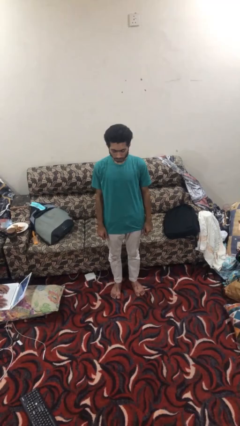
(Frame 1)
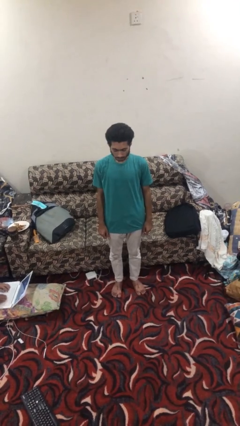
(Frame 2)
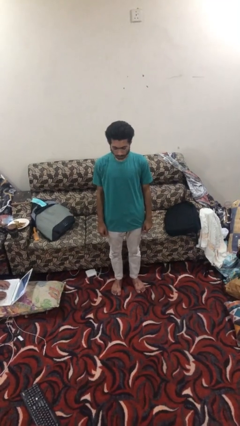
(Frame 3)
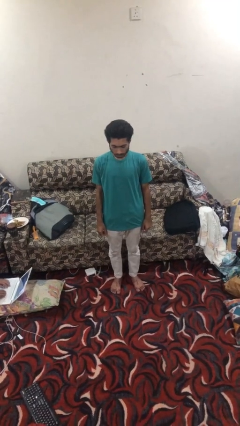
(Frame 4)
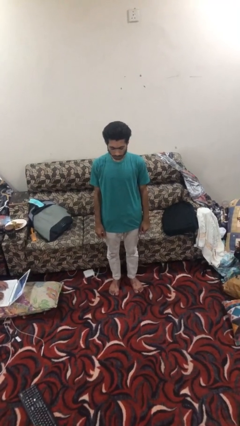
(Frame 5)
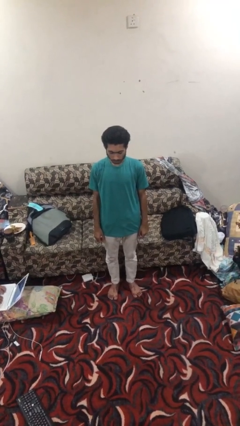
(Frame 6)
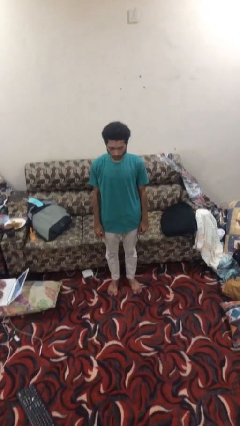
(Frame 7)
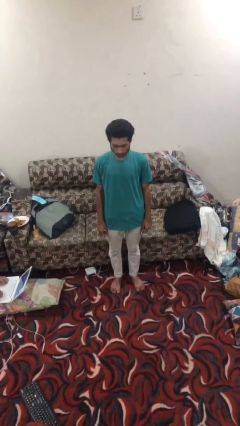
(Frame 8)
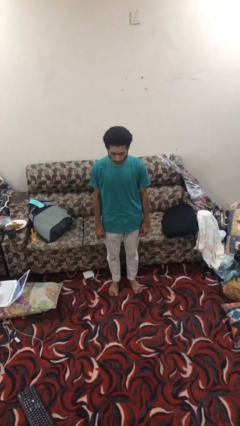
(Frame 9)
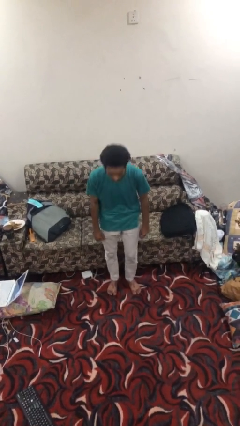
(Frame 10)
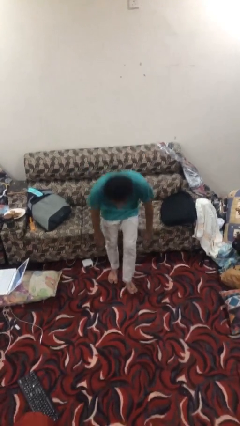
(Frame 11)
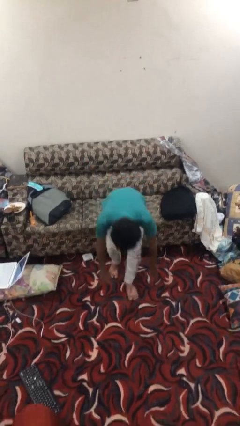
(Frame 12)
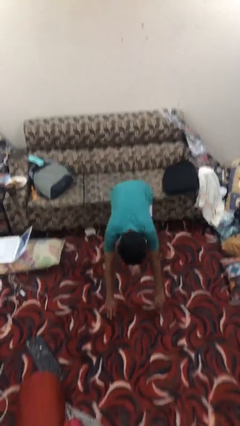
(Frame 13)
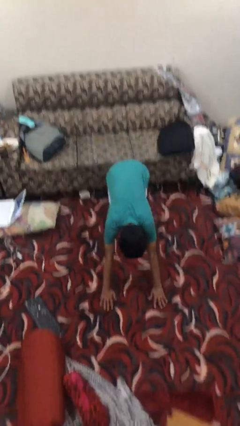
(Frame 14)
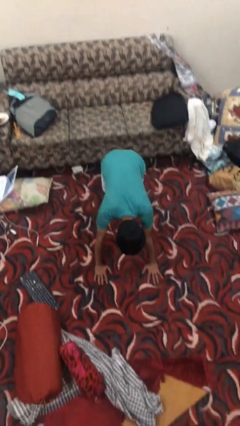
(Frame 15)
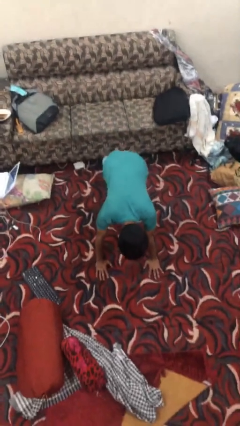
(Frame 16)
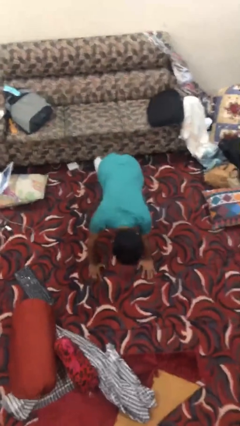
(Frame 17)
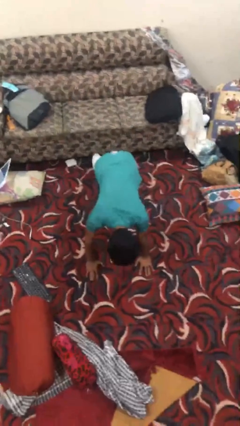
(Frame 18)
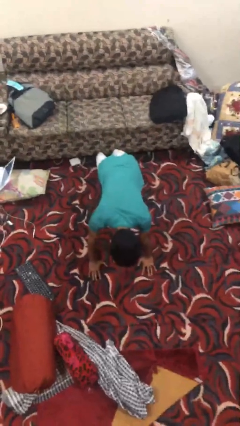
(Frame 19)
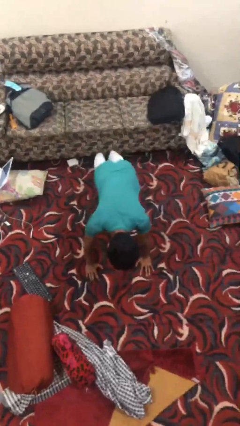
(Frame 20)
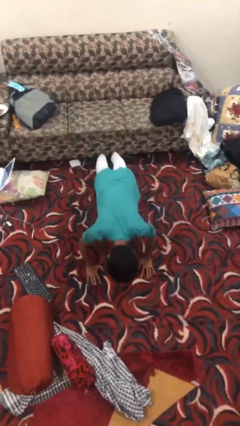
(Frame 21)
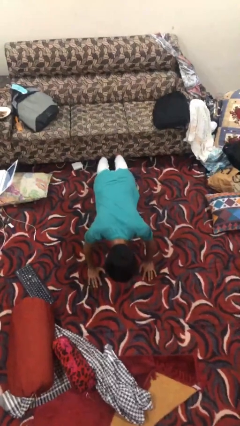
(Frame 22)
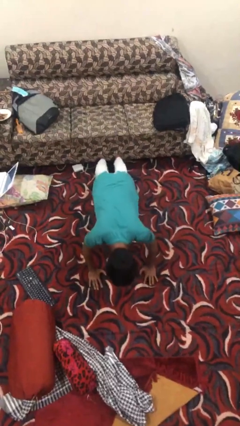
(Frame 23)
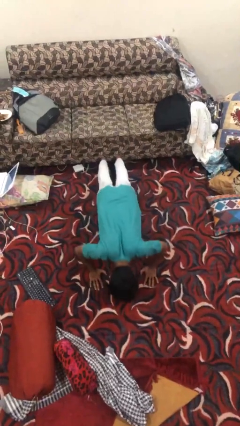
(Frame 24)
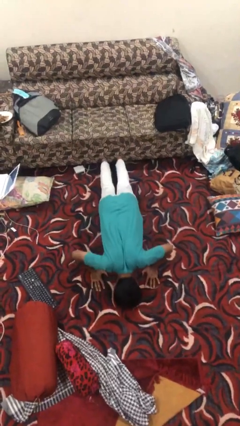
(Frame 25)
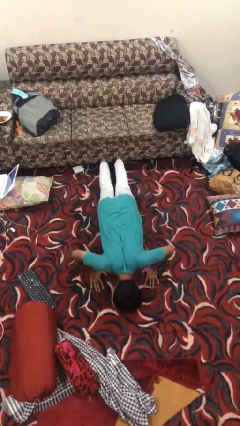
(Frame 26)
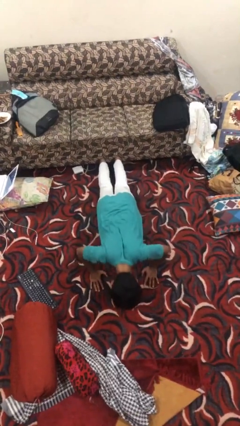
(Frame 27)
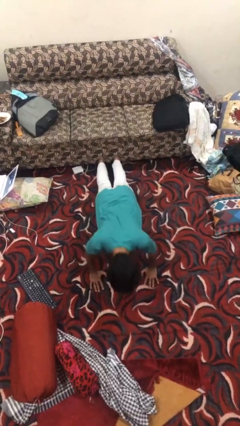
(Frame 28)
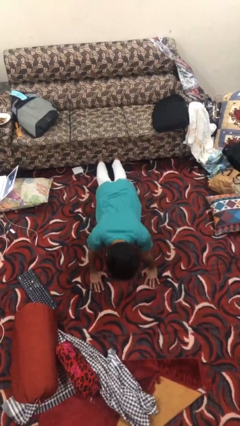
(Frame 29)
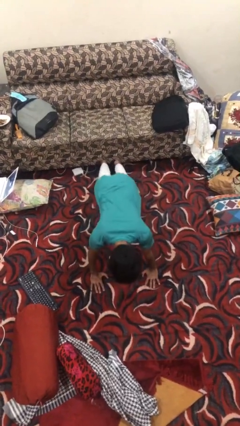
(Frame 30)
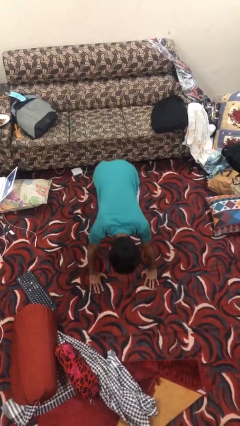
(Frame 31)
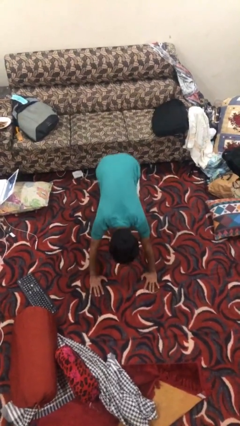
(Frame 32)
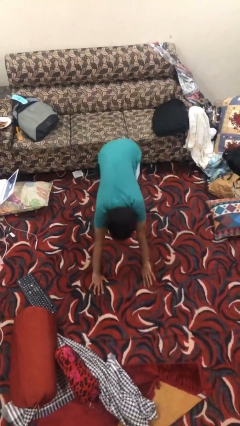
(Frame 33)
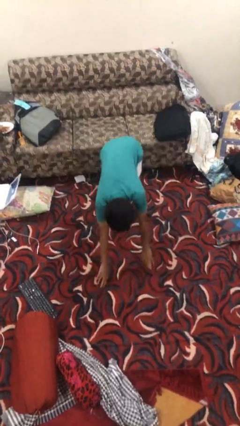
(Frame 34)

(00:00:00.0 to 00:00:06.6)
person exercises with pushup

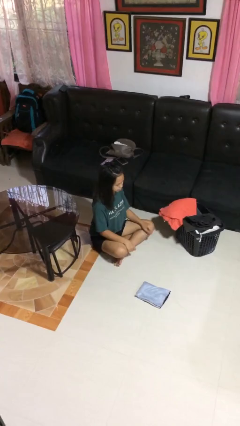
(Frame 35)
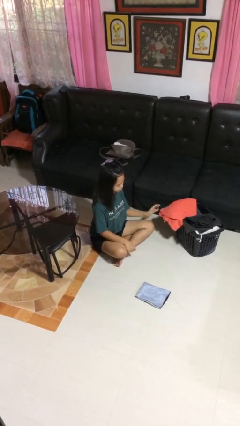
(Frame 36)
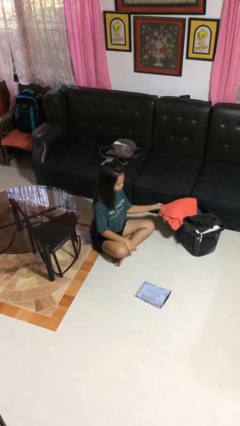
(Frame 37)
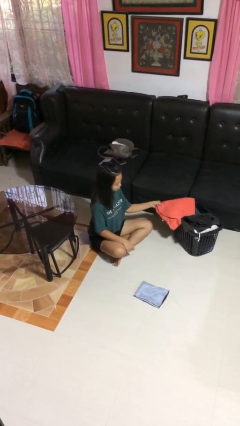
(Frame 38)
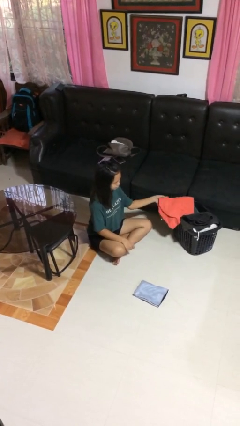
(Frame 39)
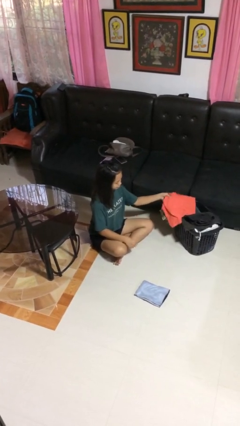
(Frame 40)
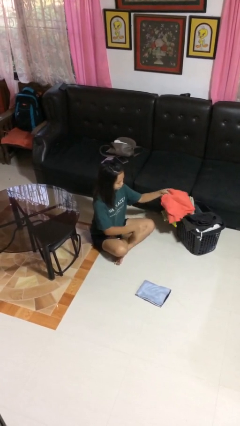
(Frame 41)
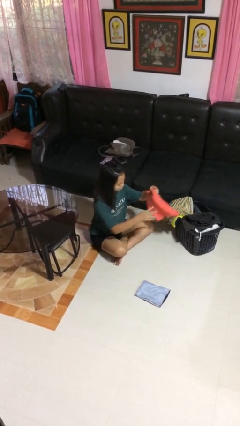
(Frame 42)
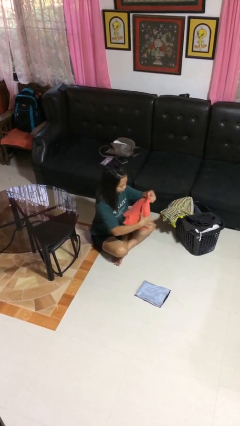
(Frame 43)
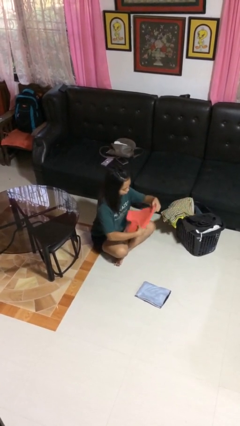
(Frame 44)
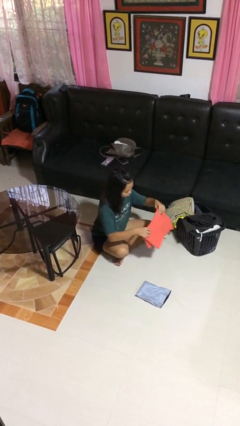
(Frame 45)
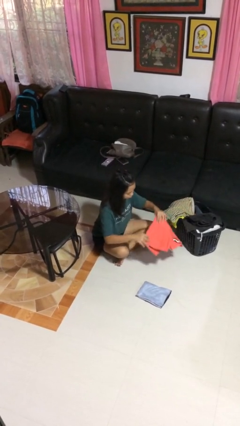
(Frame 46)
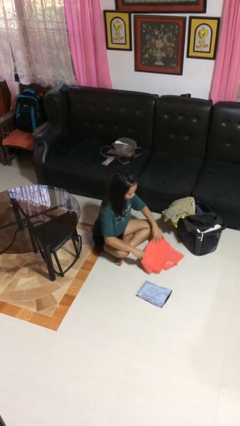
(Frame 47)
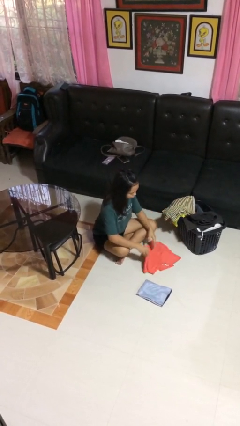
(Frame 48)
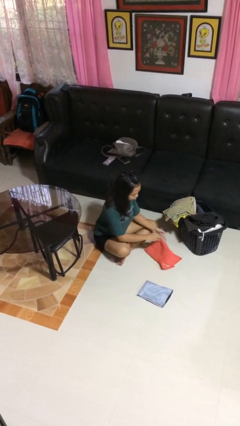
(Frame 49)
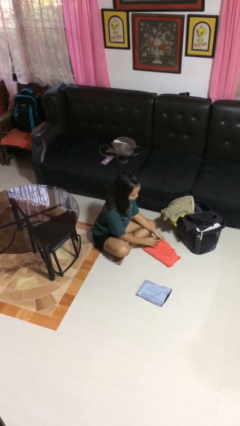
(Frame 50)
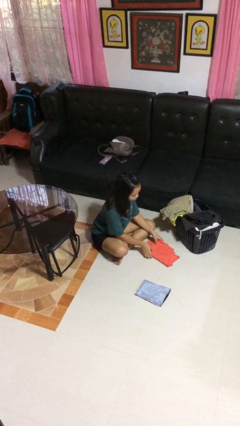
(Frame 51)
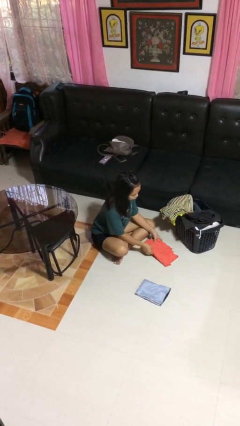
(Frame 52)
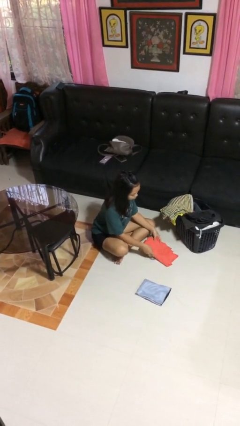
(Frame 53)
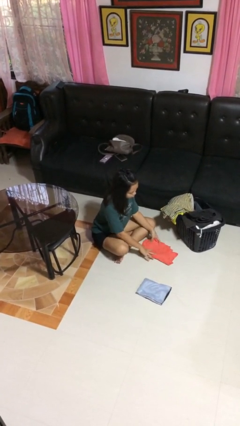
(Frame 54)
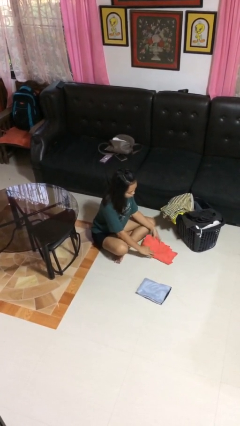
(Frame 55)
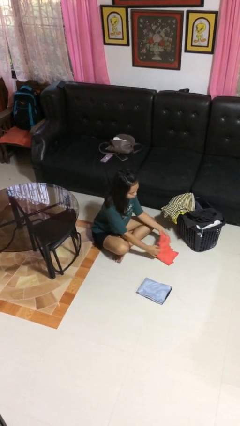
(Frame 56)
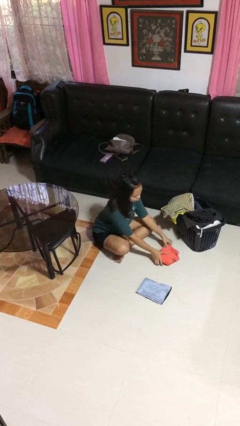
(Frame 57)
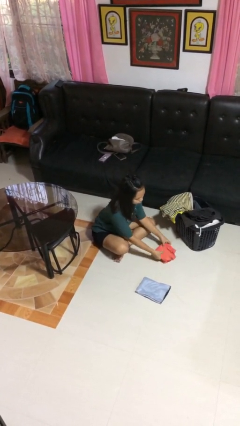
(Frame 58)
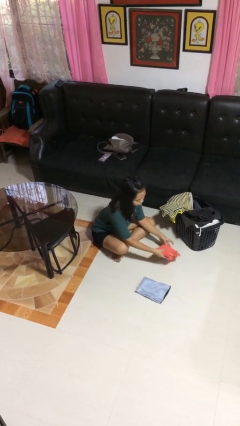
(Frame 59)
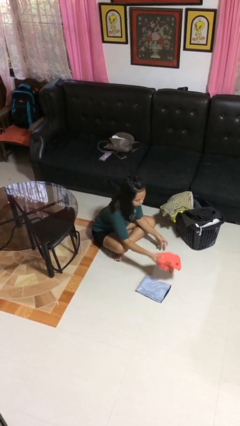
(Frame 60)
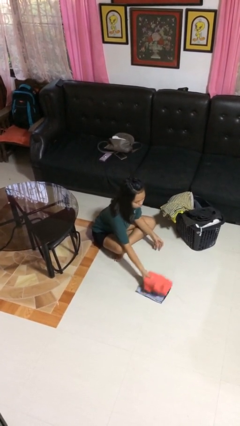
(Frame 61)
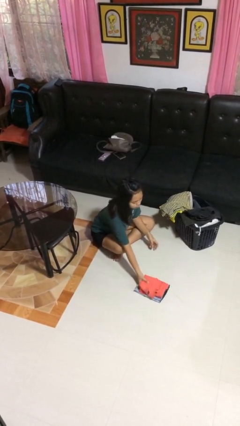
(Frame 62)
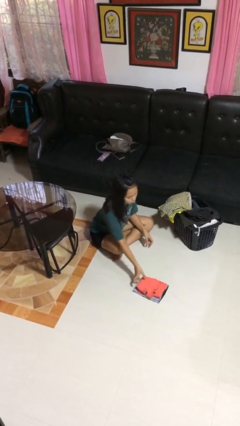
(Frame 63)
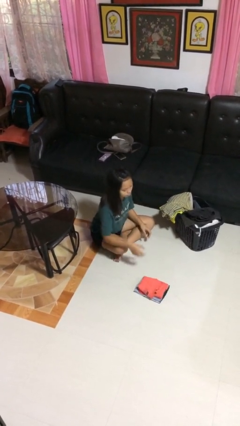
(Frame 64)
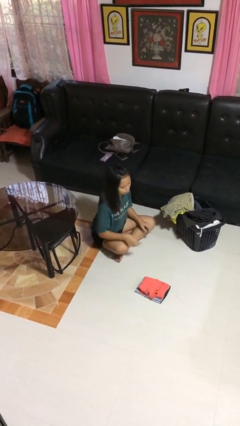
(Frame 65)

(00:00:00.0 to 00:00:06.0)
person folds shirt

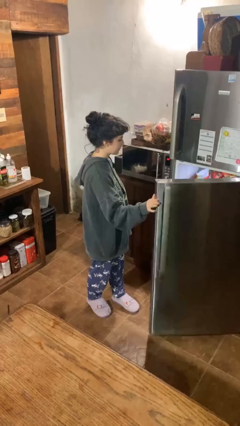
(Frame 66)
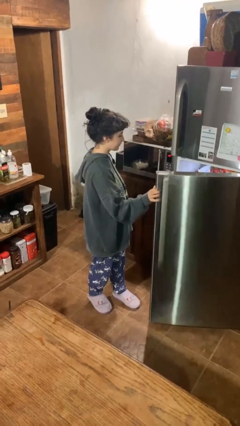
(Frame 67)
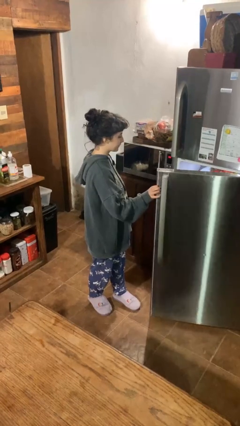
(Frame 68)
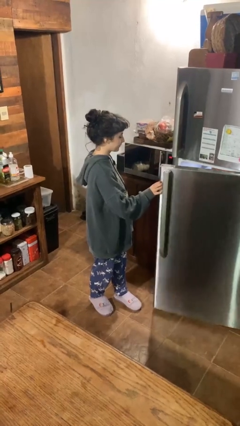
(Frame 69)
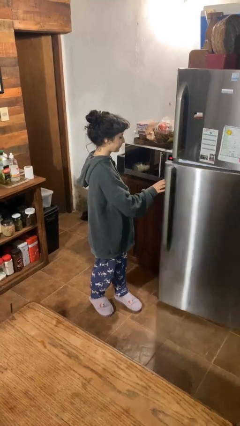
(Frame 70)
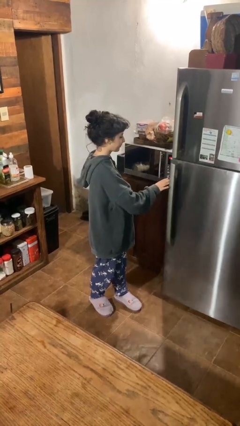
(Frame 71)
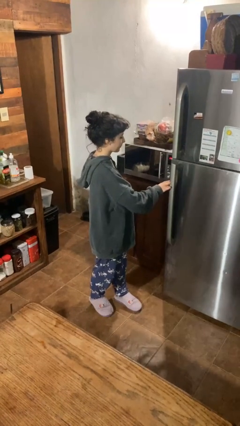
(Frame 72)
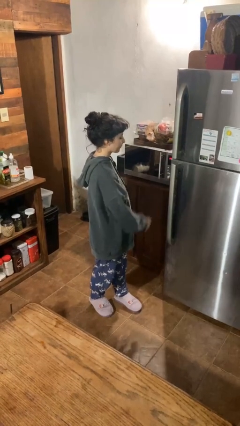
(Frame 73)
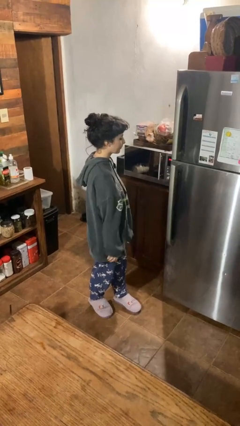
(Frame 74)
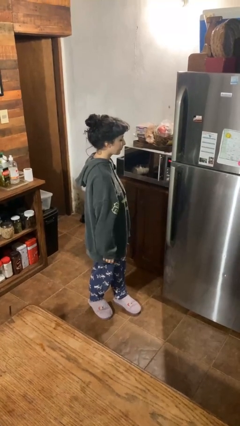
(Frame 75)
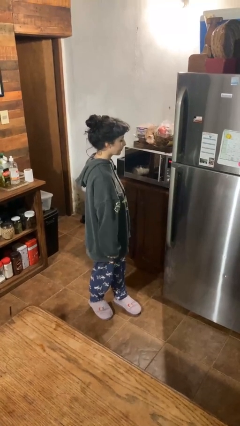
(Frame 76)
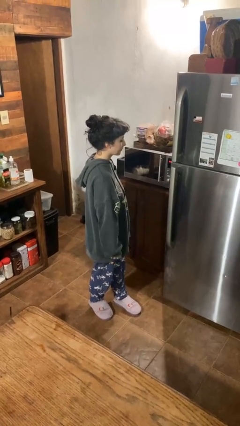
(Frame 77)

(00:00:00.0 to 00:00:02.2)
person closes refrigerator

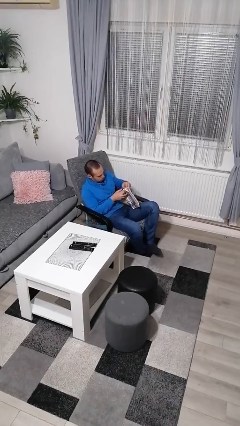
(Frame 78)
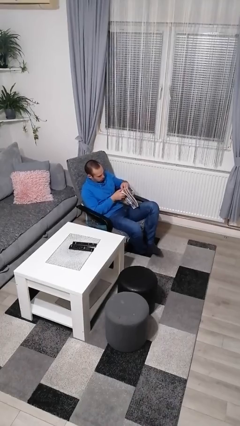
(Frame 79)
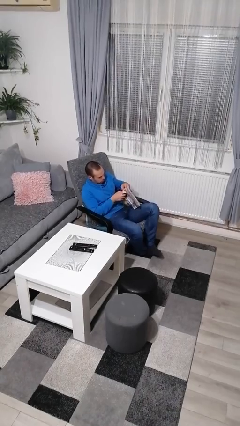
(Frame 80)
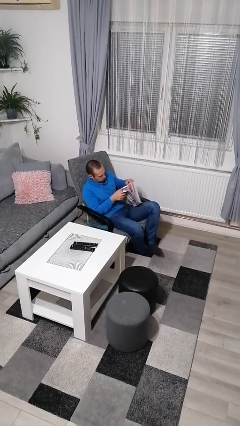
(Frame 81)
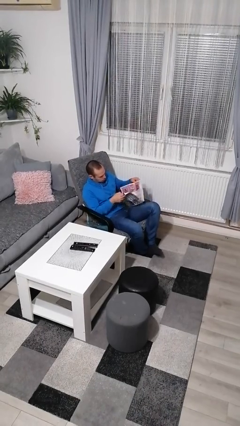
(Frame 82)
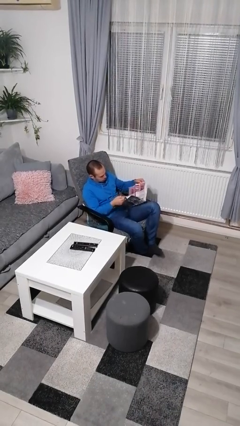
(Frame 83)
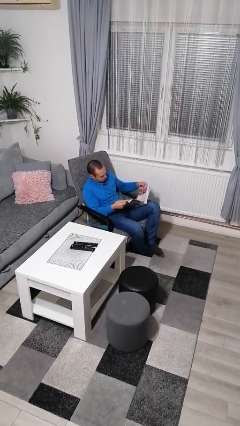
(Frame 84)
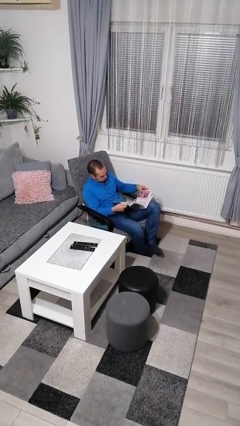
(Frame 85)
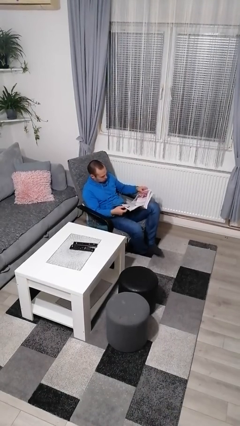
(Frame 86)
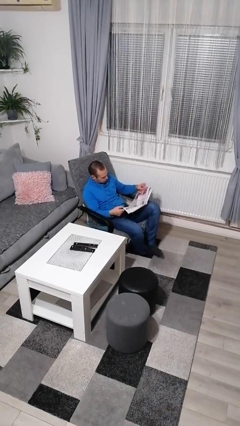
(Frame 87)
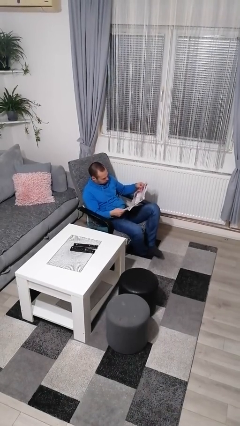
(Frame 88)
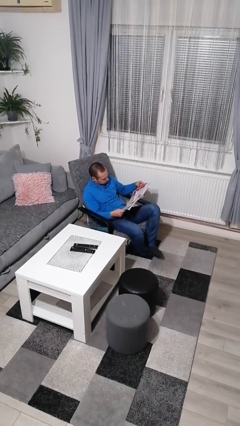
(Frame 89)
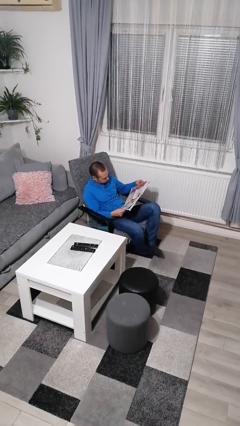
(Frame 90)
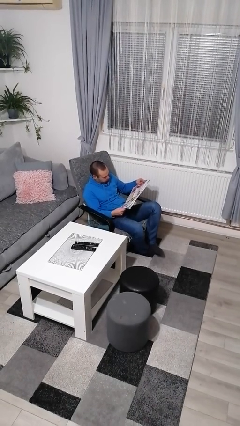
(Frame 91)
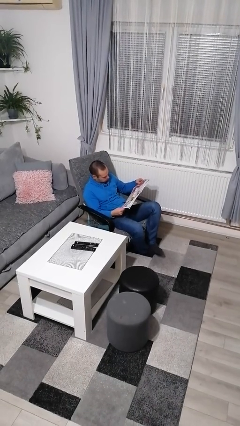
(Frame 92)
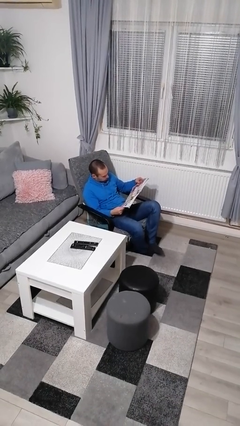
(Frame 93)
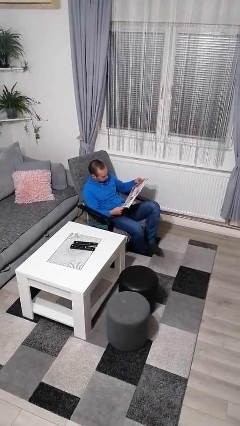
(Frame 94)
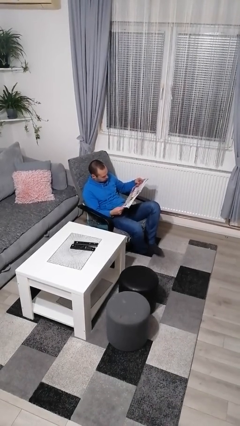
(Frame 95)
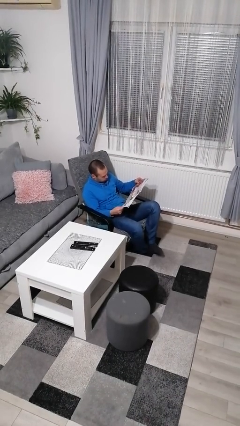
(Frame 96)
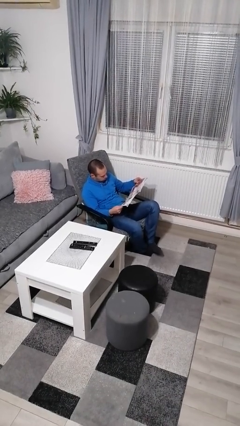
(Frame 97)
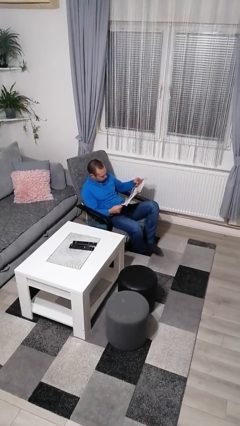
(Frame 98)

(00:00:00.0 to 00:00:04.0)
person reads newspaper
